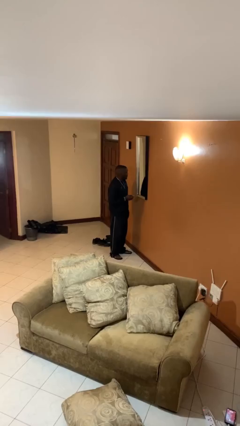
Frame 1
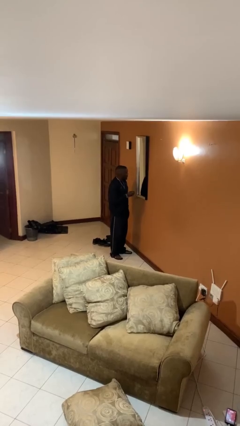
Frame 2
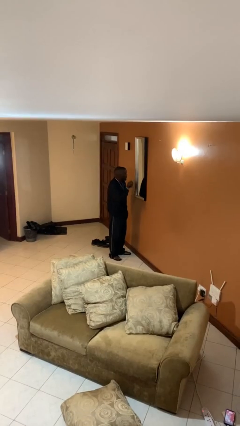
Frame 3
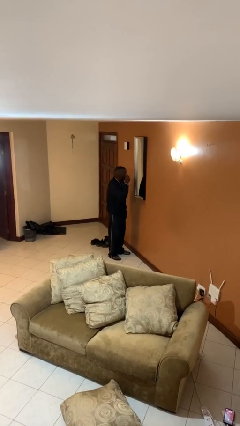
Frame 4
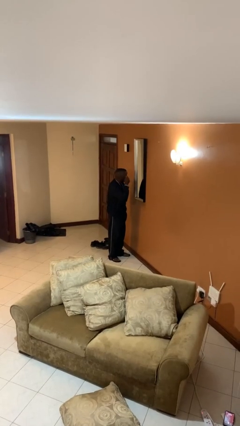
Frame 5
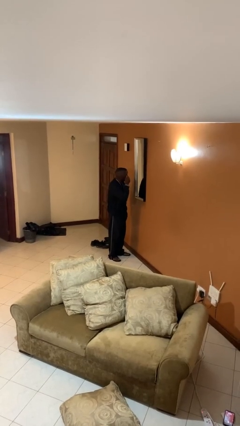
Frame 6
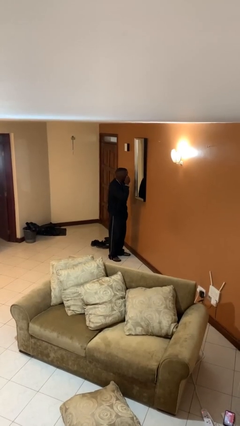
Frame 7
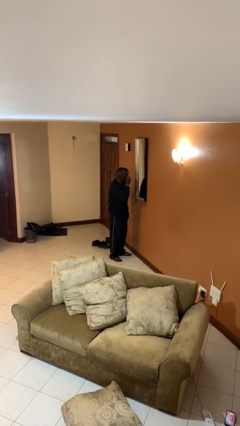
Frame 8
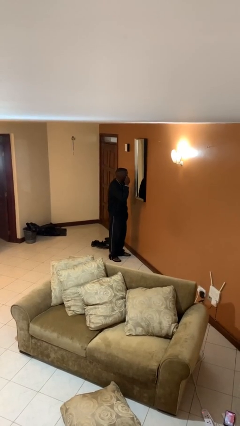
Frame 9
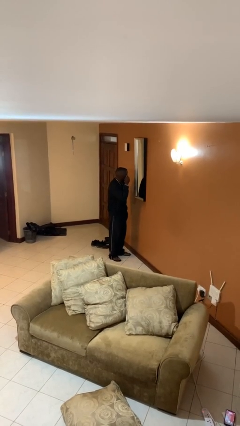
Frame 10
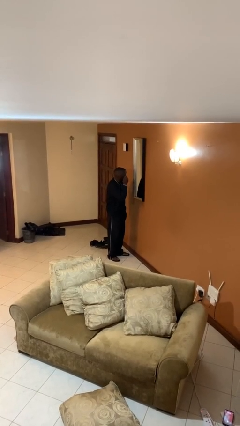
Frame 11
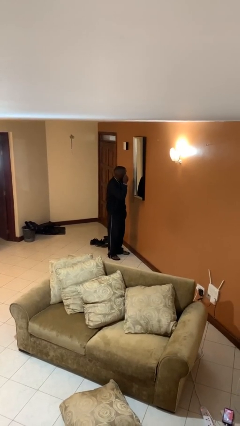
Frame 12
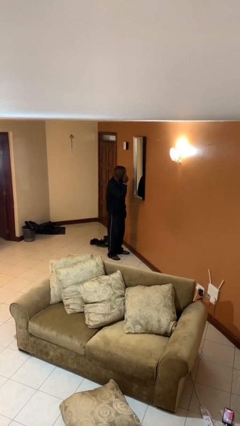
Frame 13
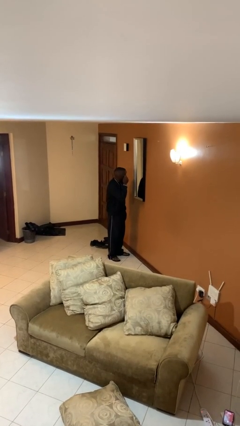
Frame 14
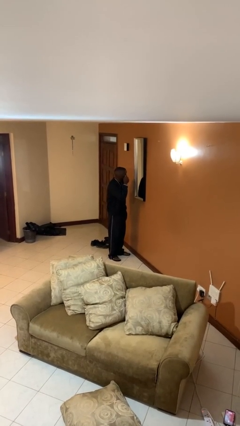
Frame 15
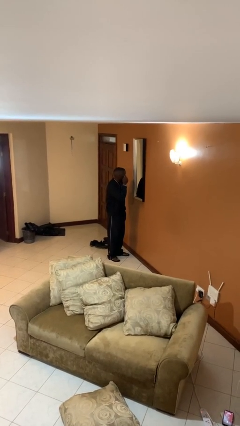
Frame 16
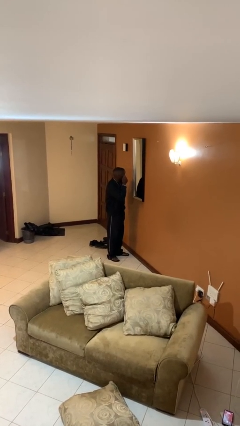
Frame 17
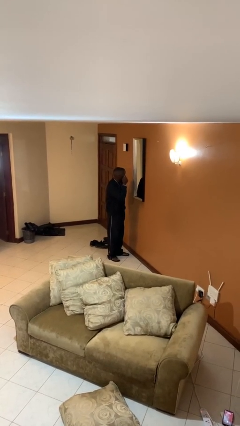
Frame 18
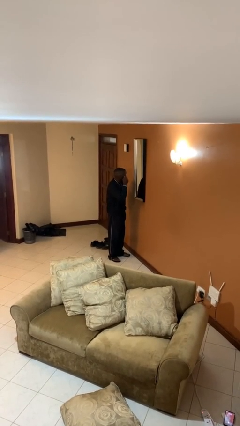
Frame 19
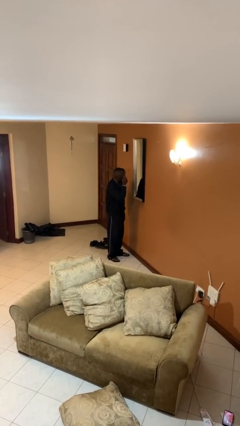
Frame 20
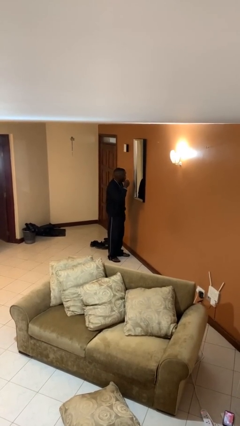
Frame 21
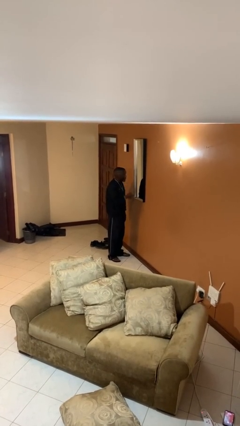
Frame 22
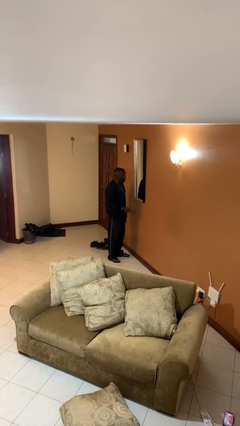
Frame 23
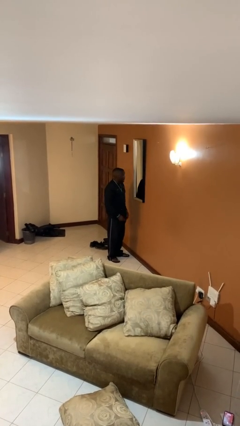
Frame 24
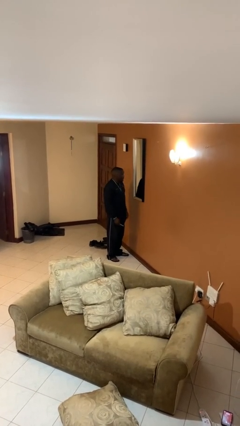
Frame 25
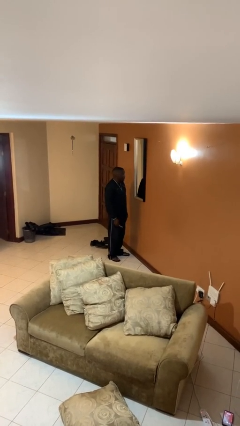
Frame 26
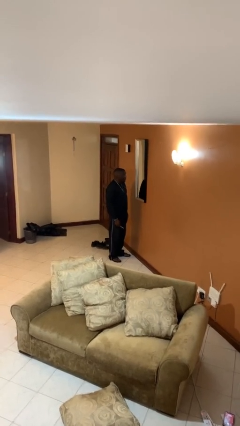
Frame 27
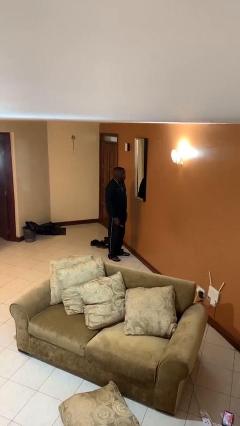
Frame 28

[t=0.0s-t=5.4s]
person applies eye makeup

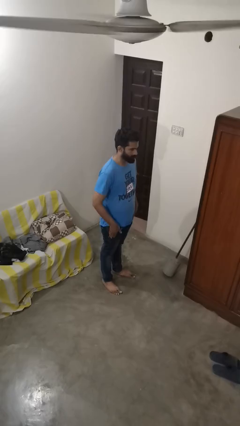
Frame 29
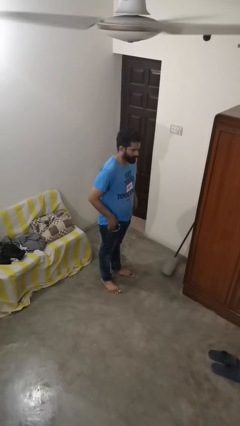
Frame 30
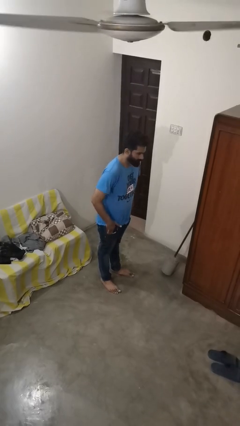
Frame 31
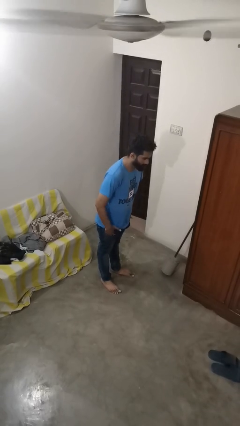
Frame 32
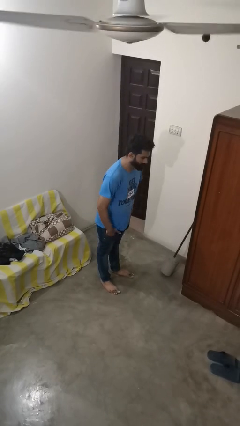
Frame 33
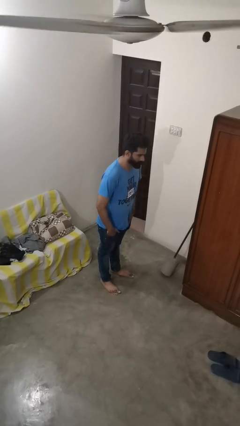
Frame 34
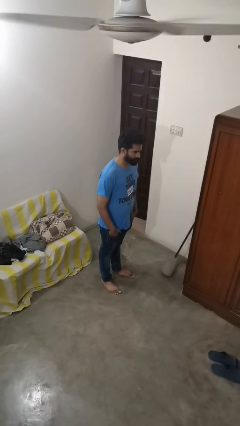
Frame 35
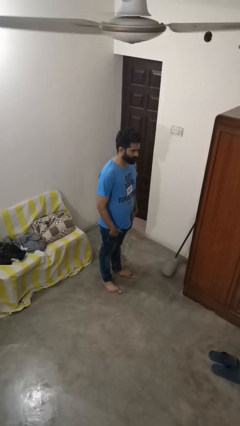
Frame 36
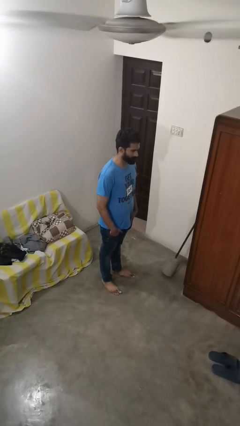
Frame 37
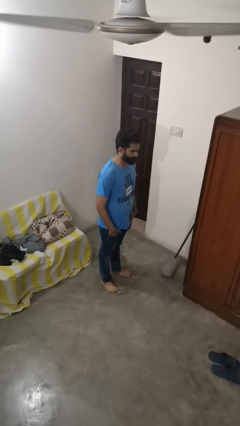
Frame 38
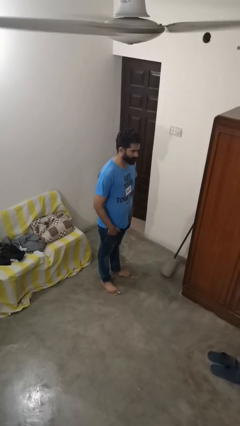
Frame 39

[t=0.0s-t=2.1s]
person puts hands in back pockets

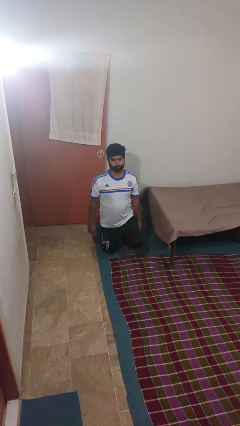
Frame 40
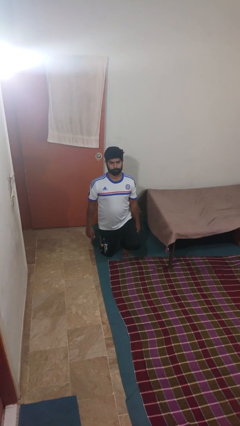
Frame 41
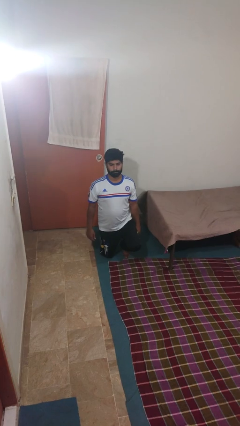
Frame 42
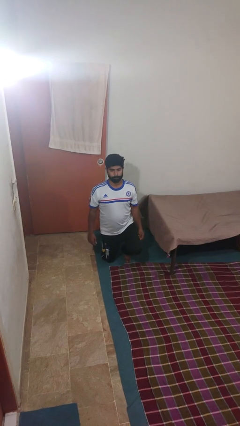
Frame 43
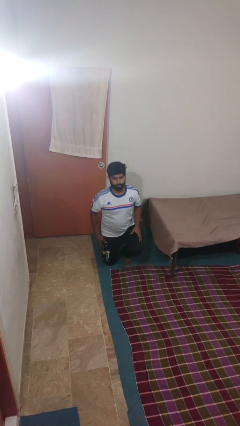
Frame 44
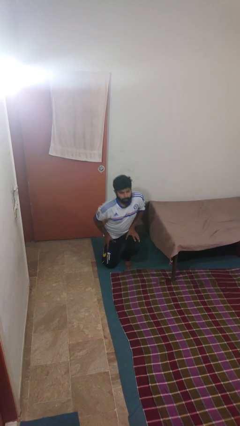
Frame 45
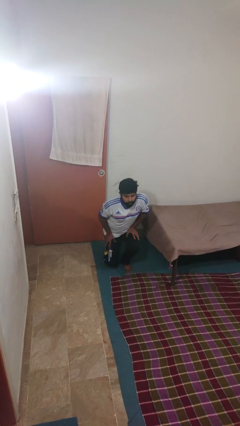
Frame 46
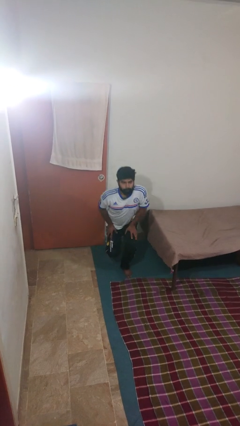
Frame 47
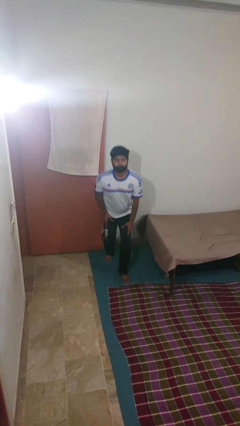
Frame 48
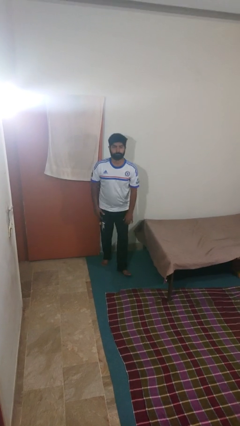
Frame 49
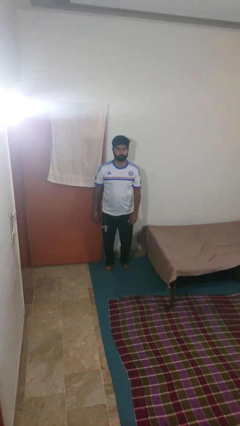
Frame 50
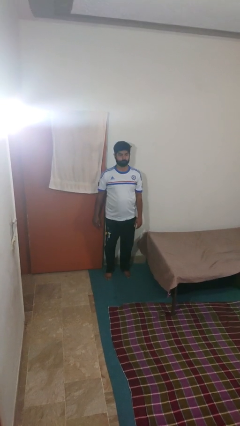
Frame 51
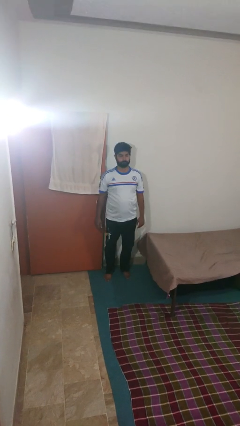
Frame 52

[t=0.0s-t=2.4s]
person stands up from floor

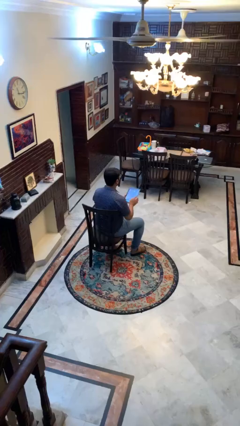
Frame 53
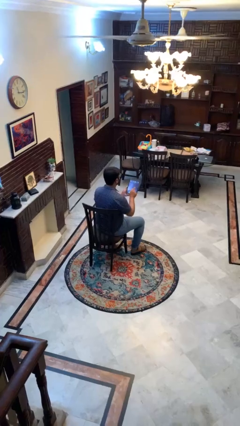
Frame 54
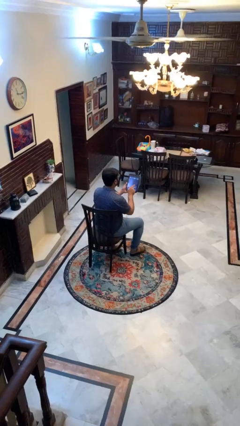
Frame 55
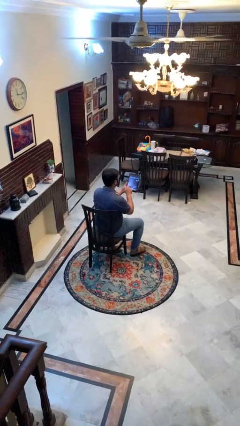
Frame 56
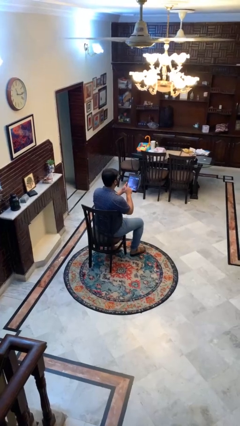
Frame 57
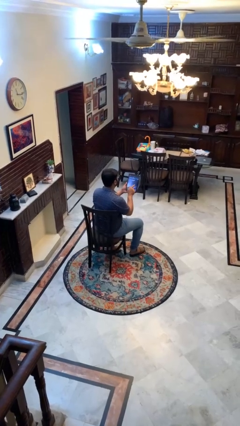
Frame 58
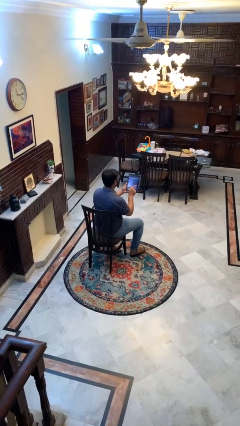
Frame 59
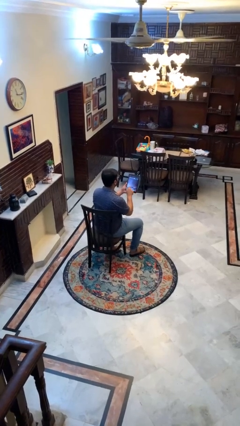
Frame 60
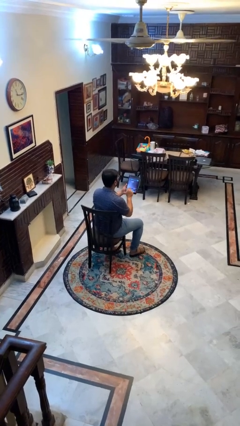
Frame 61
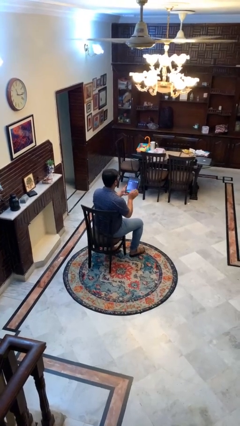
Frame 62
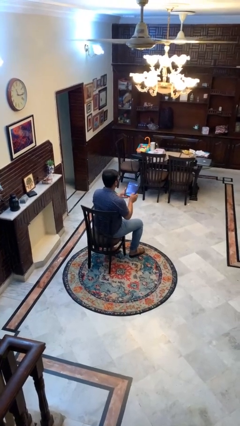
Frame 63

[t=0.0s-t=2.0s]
person interacts with tablet

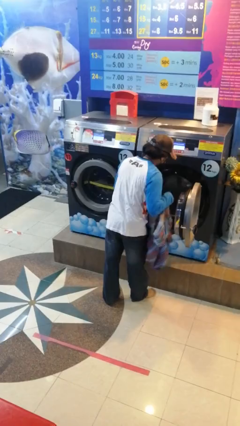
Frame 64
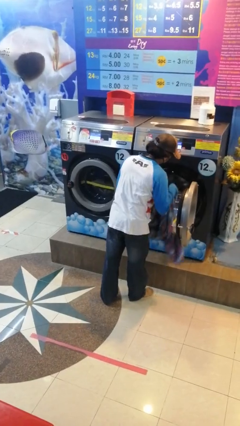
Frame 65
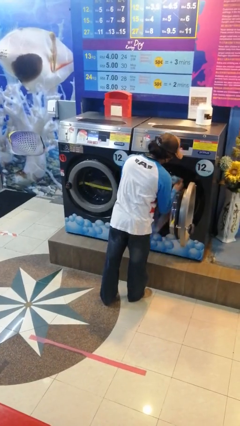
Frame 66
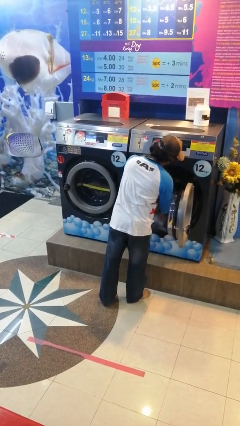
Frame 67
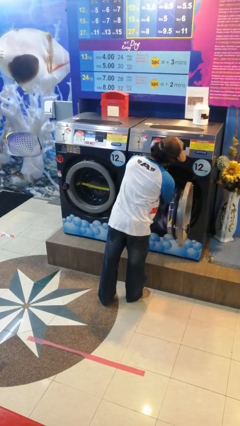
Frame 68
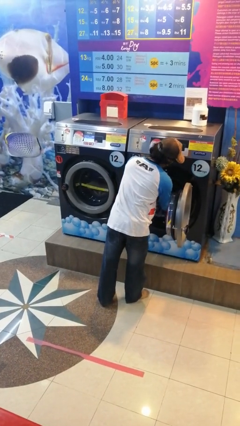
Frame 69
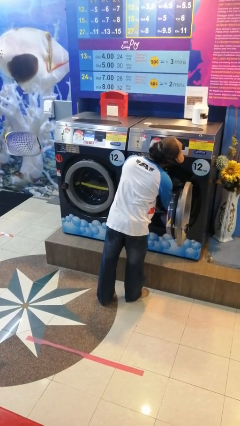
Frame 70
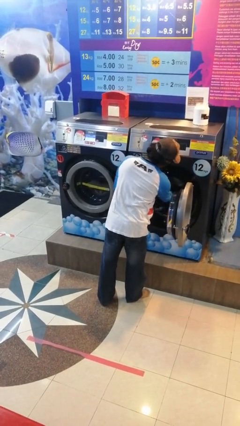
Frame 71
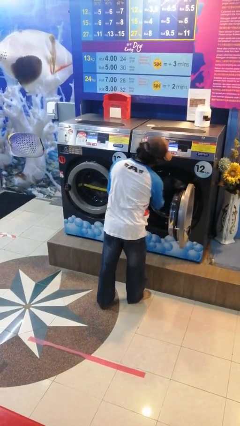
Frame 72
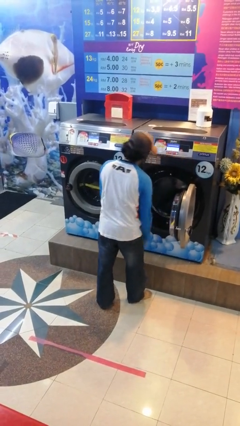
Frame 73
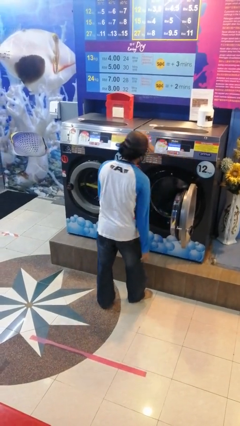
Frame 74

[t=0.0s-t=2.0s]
person loads clotheswasher

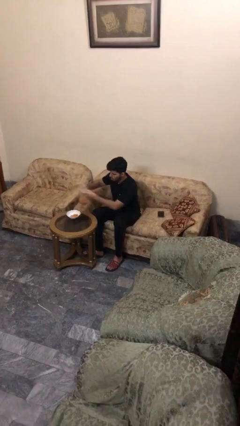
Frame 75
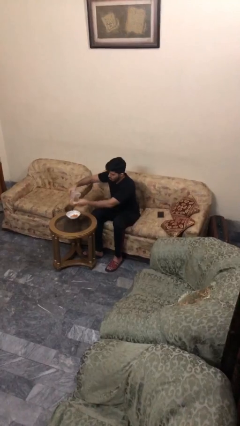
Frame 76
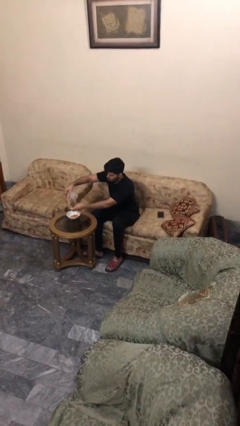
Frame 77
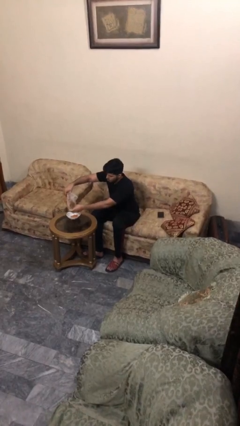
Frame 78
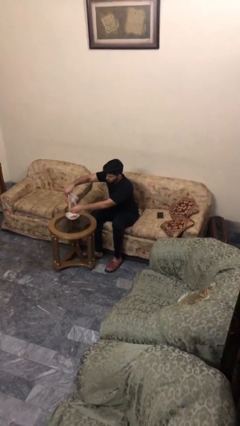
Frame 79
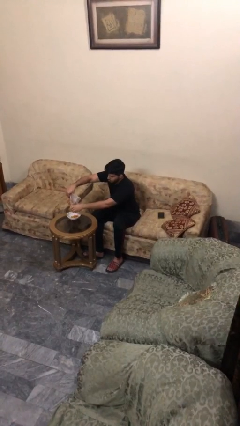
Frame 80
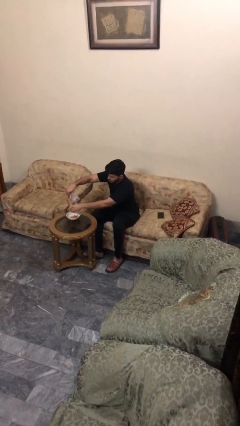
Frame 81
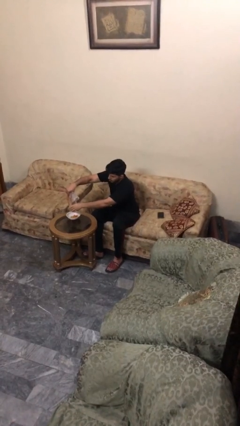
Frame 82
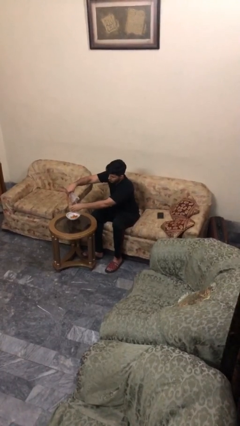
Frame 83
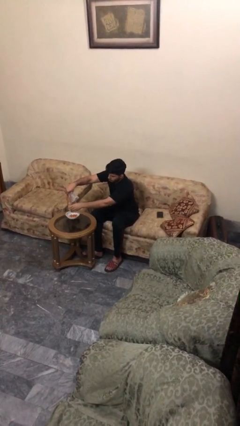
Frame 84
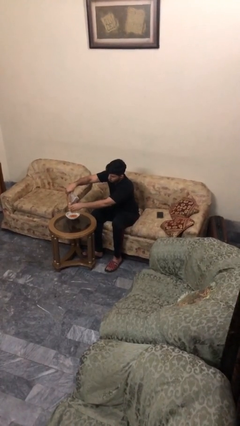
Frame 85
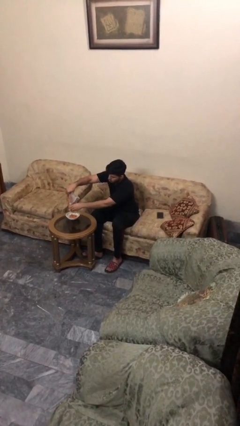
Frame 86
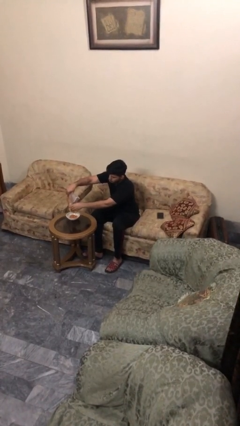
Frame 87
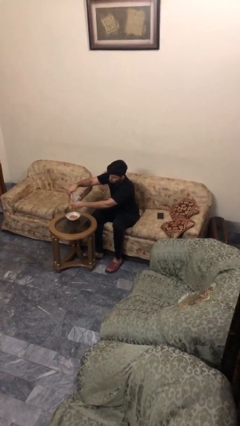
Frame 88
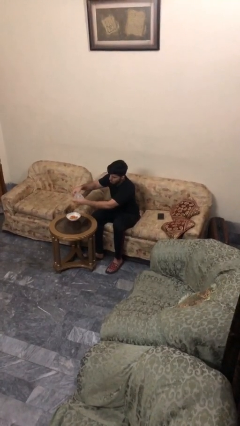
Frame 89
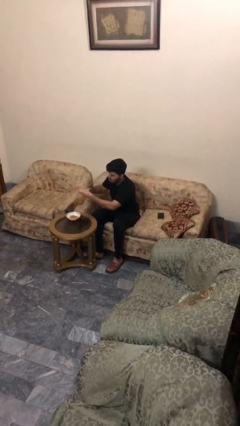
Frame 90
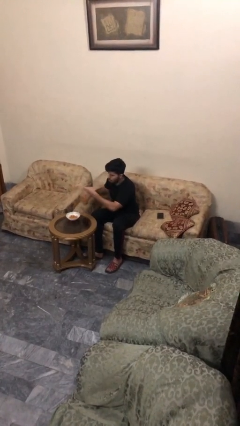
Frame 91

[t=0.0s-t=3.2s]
person pours into bowl

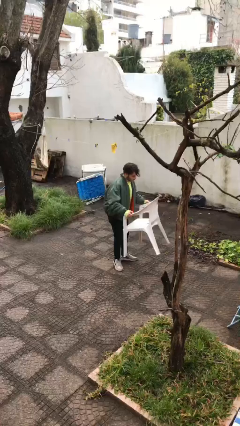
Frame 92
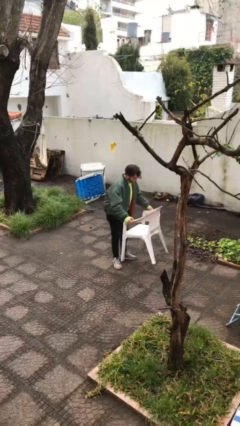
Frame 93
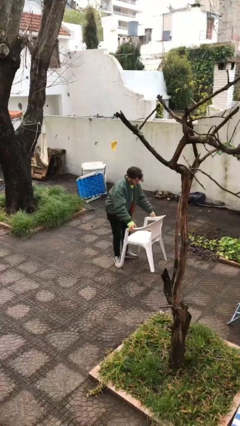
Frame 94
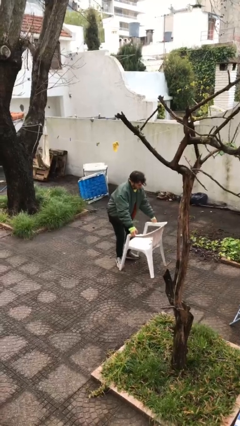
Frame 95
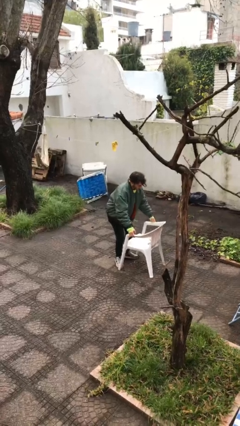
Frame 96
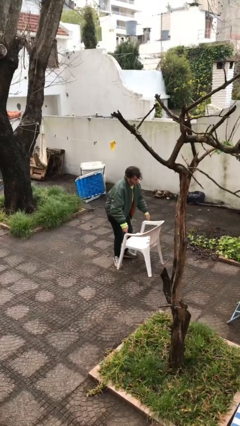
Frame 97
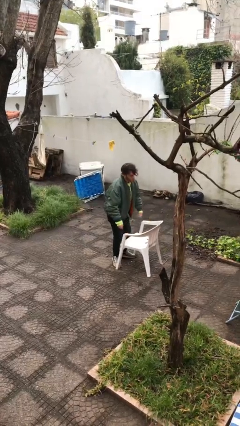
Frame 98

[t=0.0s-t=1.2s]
person puts down object on floor
